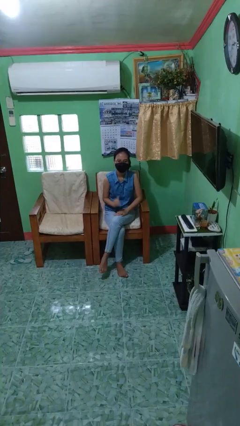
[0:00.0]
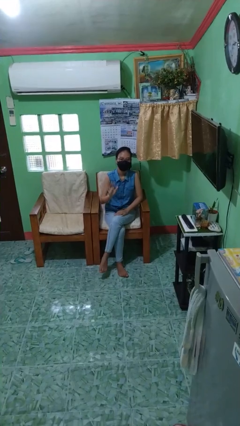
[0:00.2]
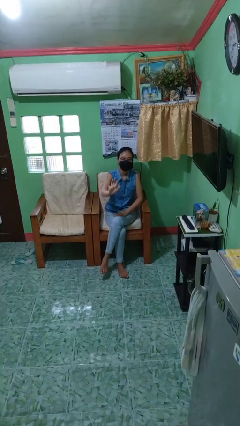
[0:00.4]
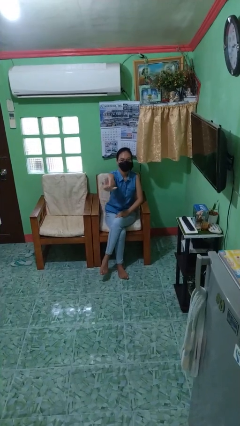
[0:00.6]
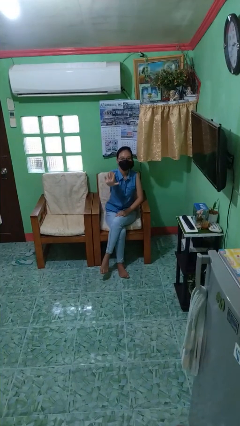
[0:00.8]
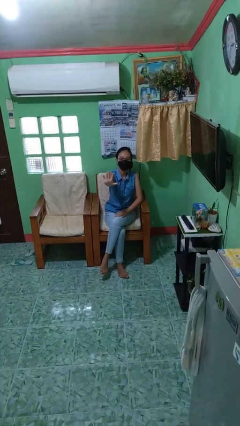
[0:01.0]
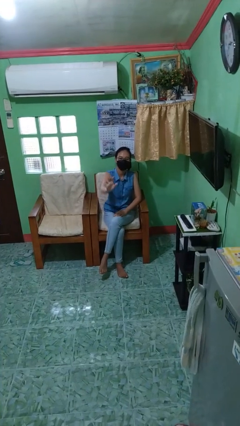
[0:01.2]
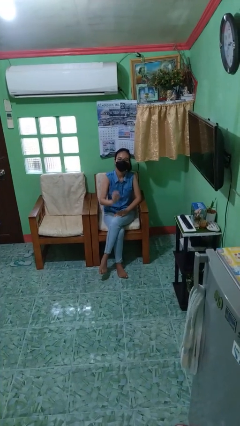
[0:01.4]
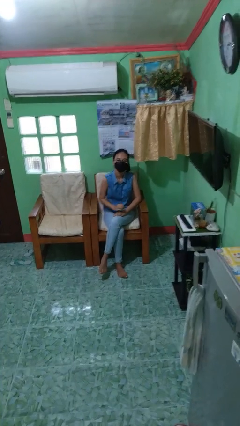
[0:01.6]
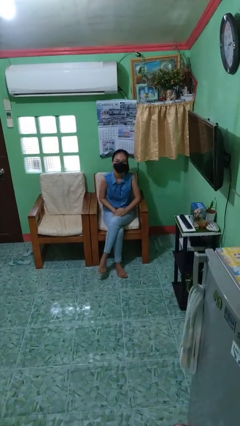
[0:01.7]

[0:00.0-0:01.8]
person gestures stop

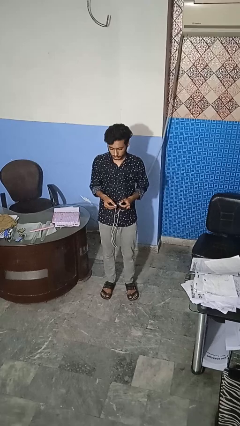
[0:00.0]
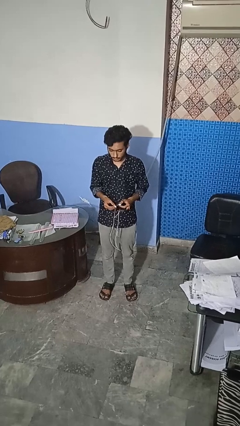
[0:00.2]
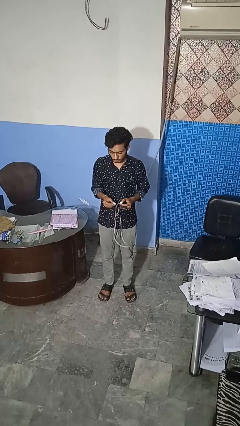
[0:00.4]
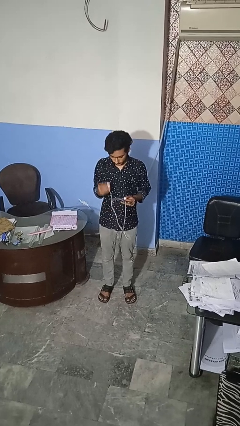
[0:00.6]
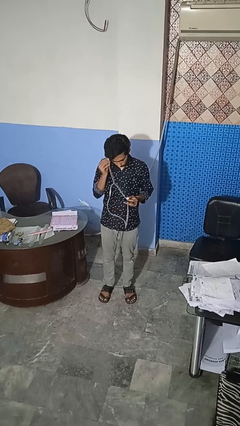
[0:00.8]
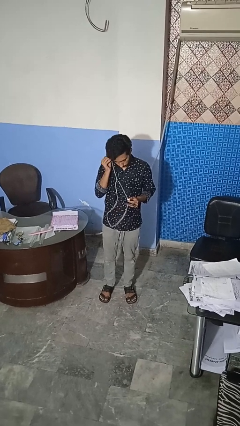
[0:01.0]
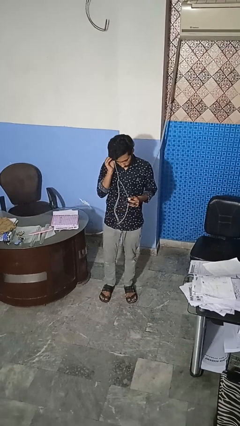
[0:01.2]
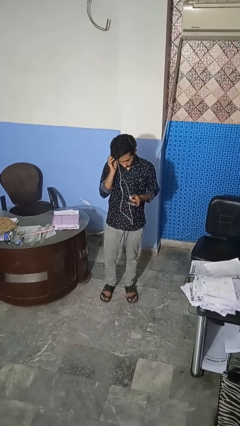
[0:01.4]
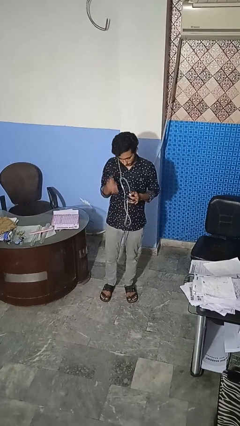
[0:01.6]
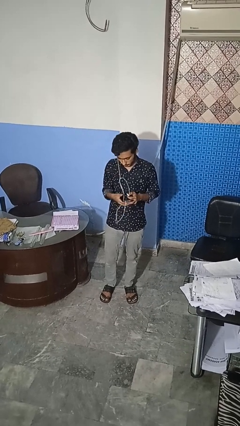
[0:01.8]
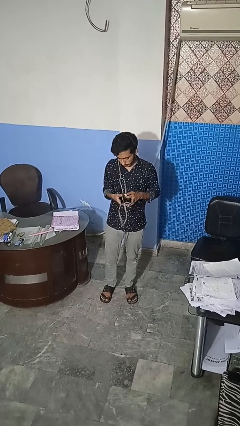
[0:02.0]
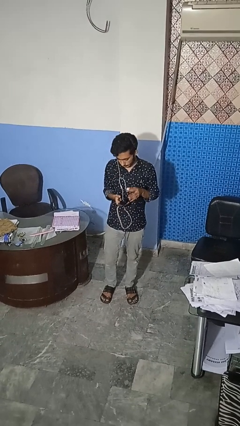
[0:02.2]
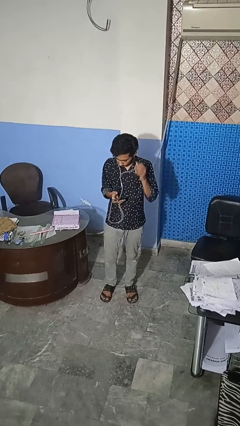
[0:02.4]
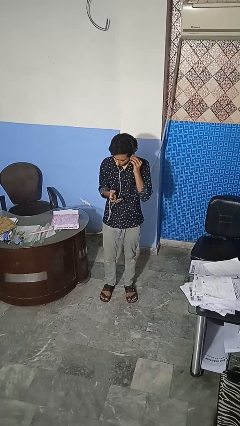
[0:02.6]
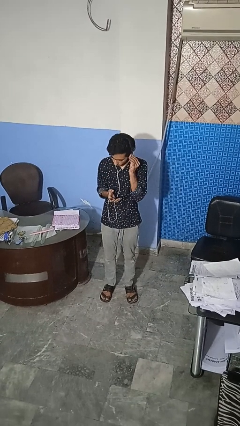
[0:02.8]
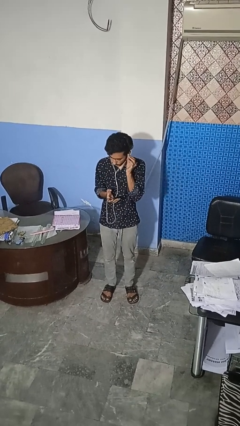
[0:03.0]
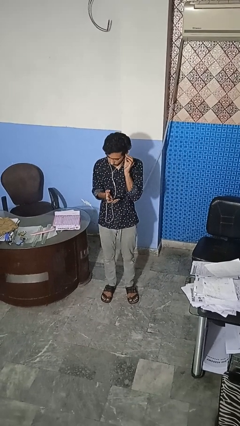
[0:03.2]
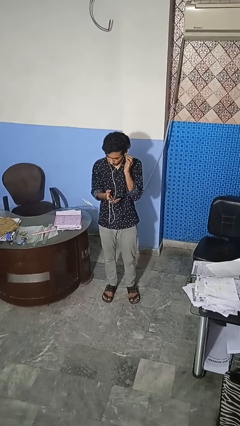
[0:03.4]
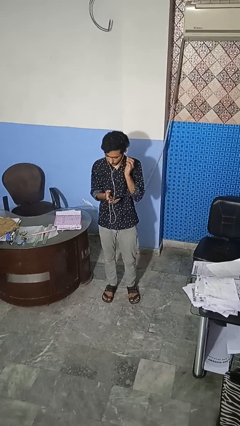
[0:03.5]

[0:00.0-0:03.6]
person puts on headphones

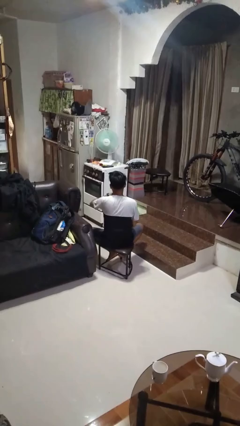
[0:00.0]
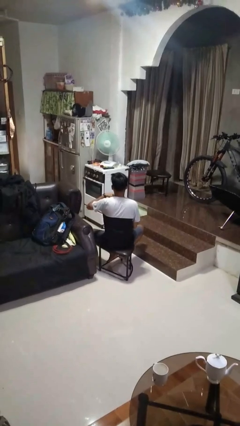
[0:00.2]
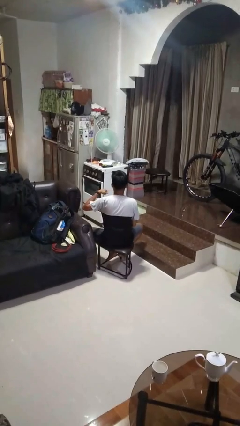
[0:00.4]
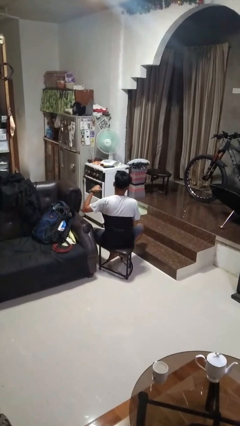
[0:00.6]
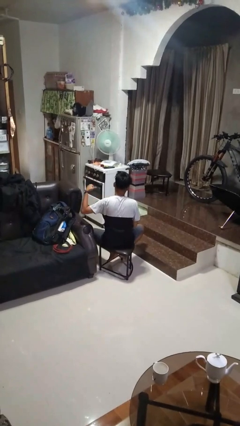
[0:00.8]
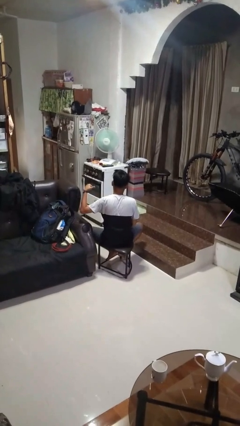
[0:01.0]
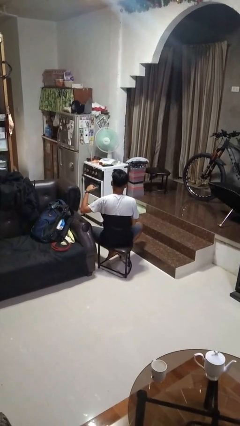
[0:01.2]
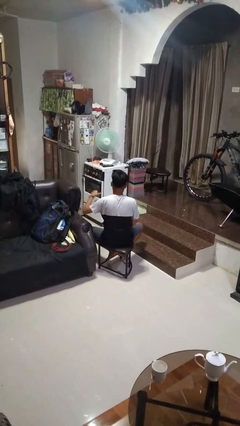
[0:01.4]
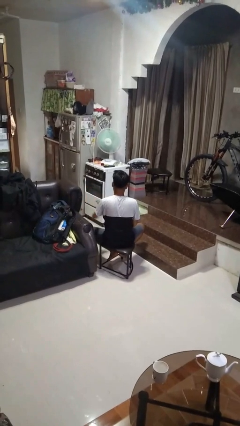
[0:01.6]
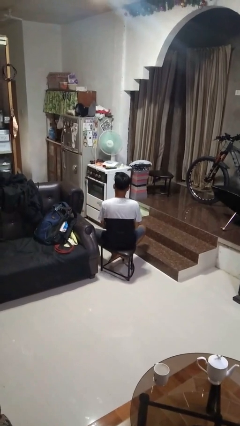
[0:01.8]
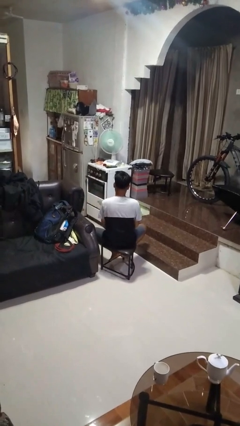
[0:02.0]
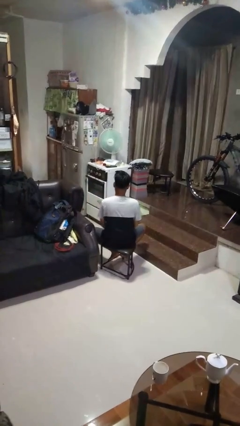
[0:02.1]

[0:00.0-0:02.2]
person gestures cut

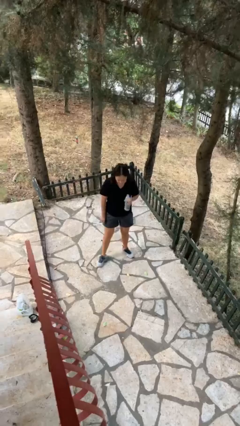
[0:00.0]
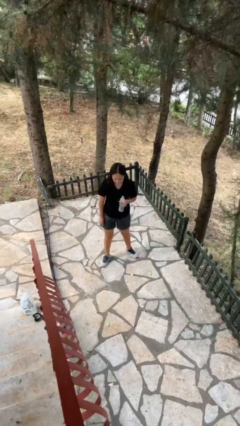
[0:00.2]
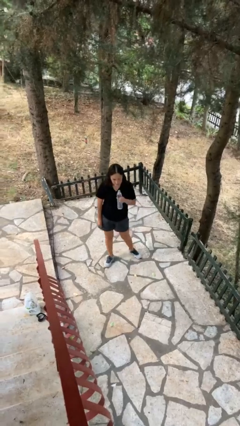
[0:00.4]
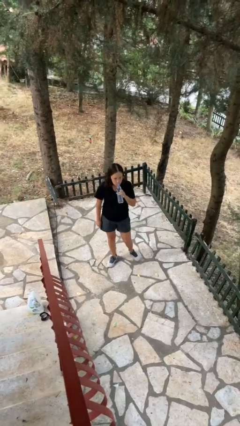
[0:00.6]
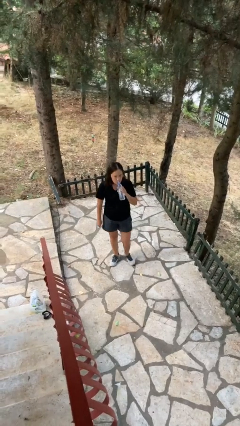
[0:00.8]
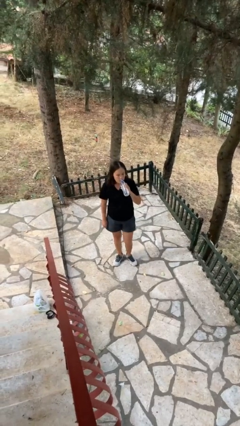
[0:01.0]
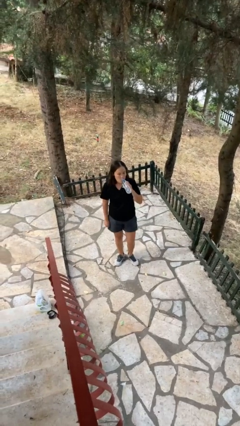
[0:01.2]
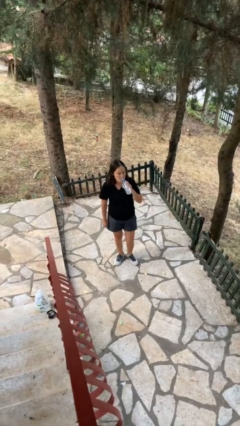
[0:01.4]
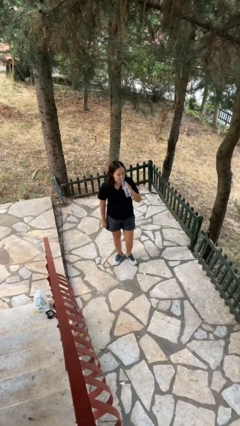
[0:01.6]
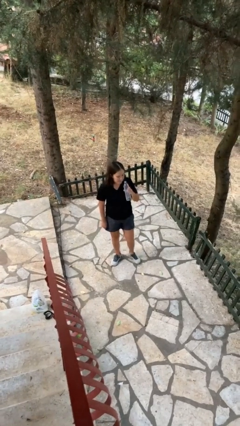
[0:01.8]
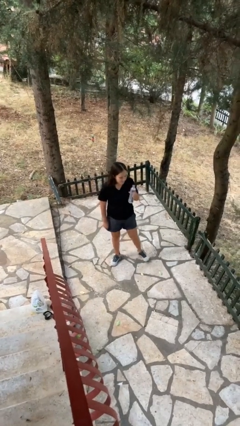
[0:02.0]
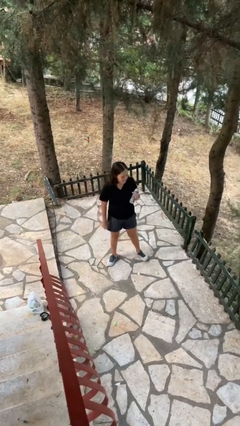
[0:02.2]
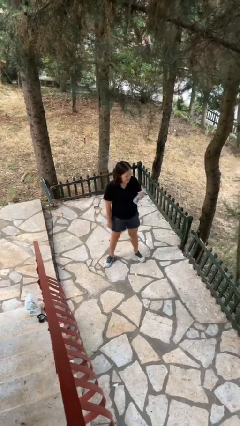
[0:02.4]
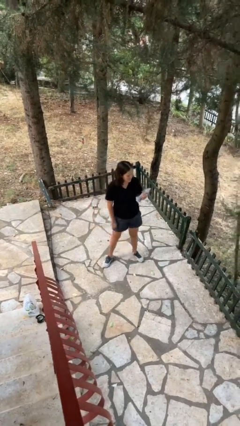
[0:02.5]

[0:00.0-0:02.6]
person drinks from bottle

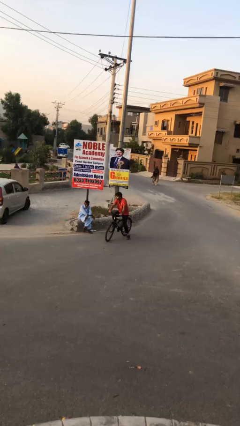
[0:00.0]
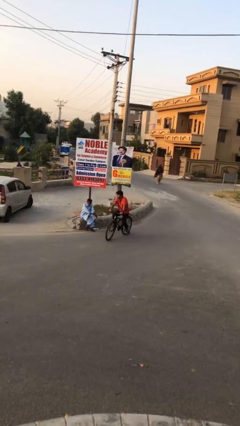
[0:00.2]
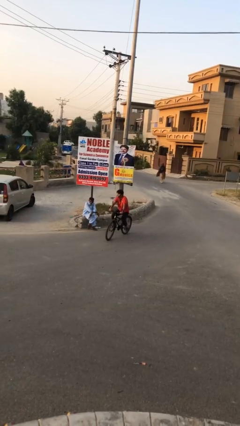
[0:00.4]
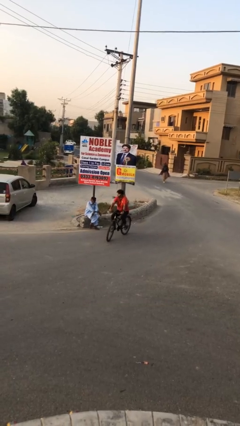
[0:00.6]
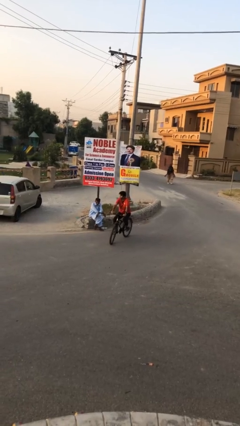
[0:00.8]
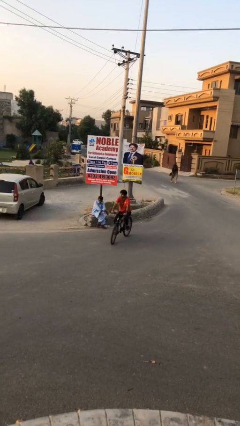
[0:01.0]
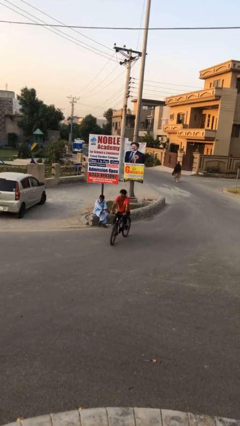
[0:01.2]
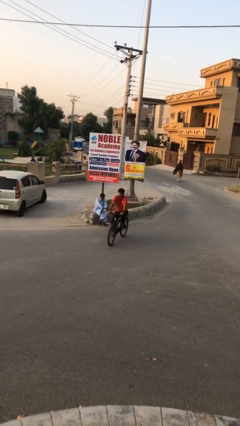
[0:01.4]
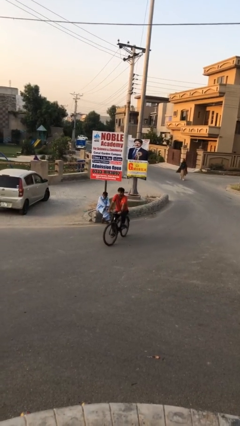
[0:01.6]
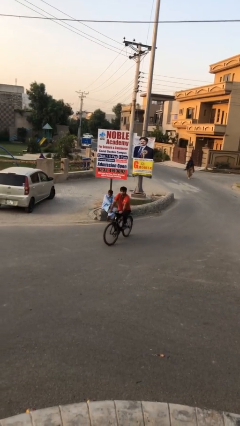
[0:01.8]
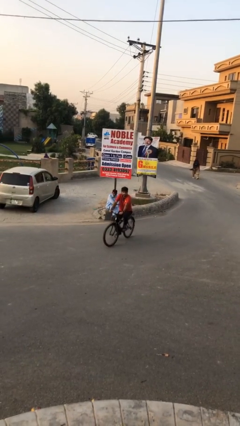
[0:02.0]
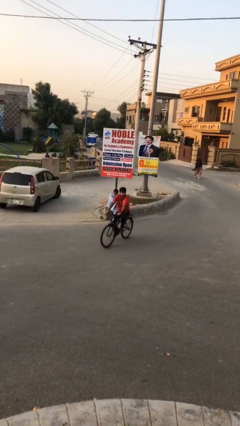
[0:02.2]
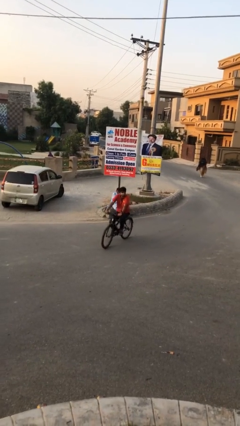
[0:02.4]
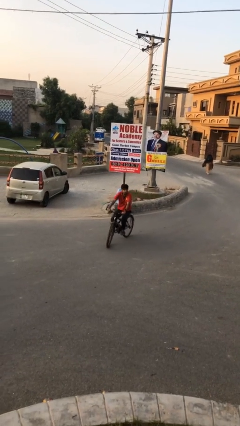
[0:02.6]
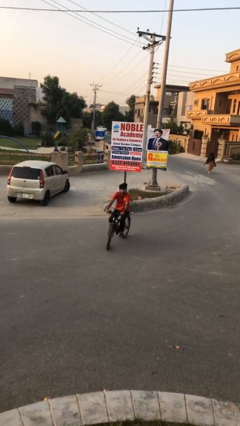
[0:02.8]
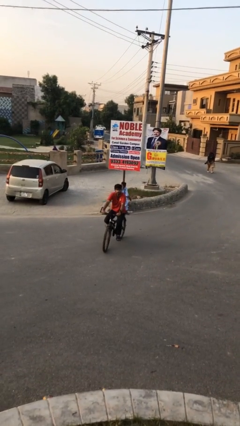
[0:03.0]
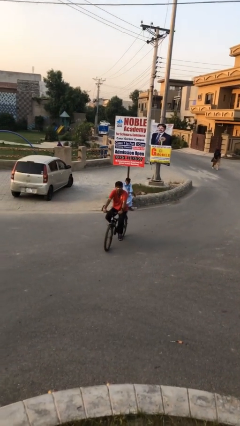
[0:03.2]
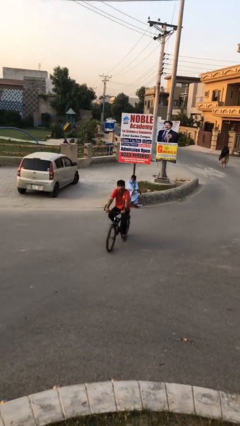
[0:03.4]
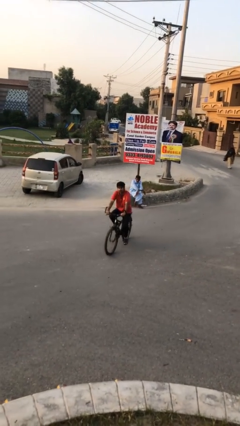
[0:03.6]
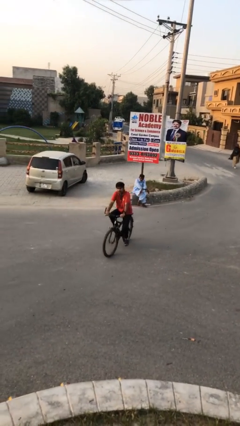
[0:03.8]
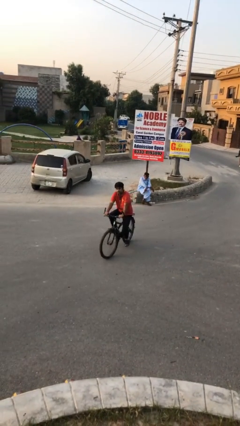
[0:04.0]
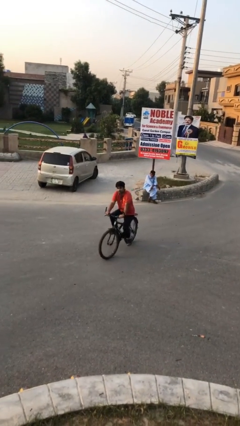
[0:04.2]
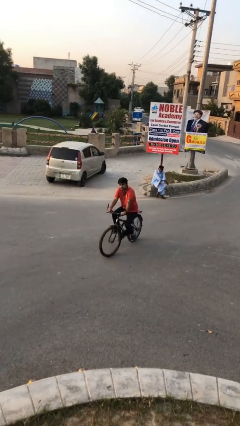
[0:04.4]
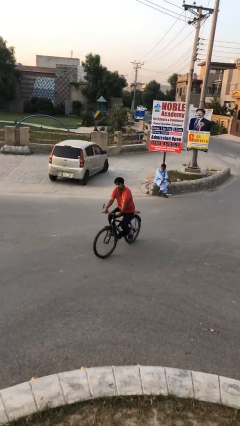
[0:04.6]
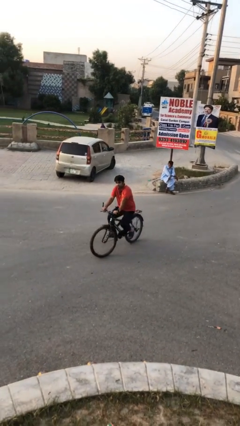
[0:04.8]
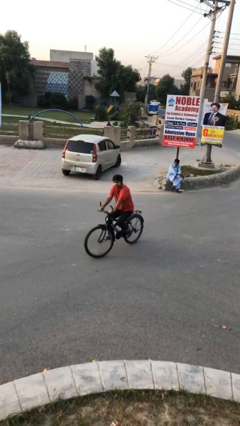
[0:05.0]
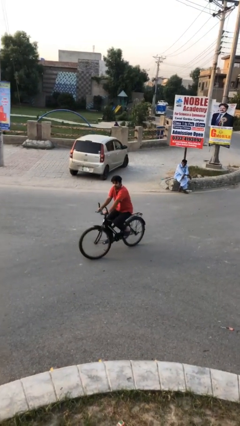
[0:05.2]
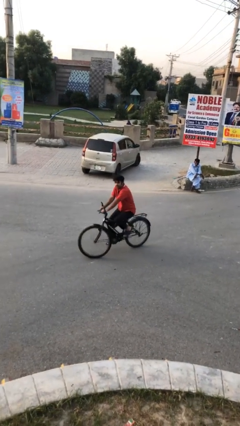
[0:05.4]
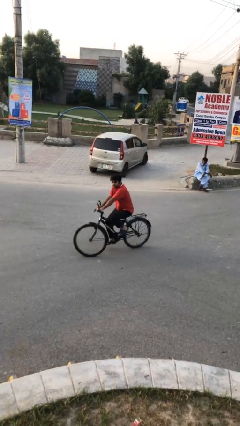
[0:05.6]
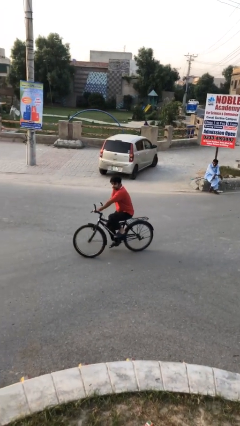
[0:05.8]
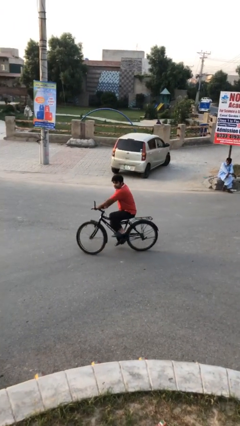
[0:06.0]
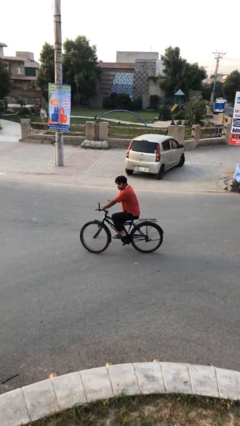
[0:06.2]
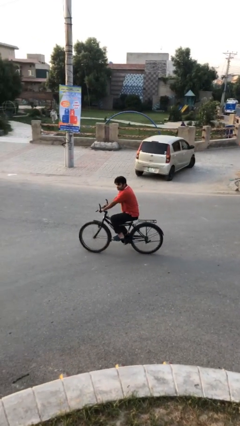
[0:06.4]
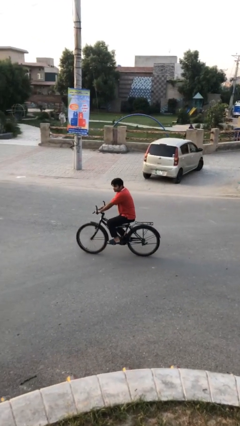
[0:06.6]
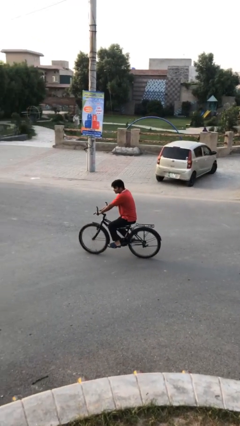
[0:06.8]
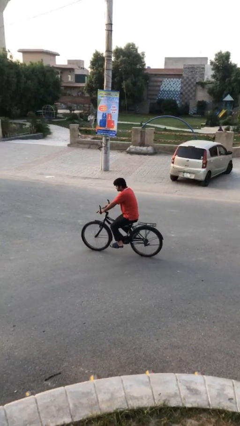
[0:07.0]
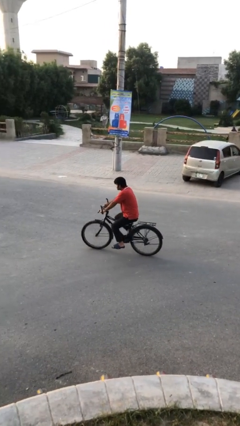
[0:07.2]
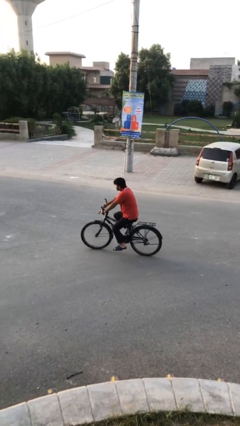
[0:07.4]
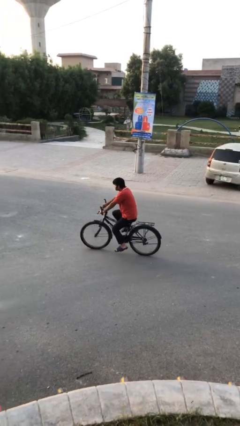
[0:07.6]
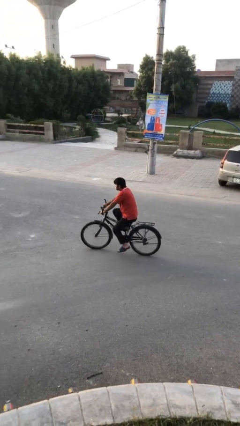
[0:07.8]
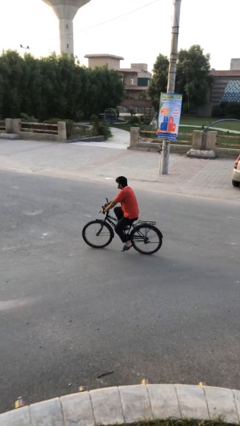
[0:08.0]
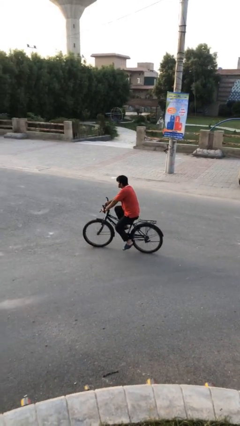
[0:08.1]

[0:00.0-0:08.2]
person rides bicycle
